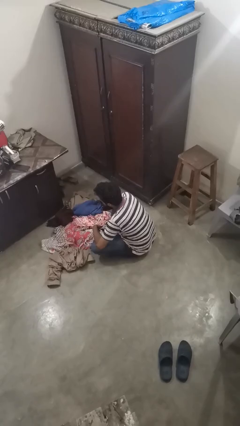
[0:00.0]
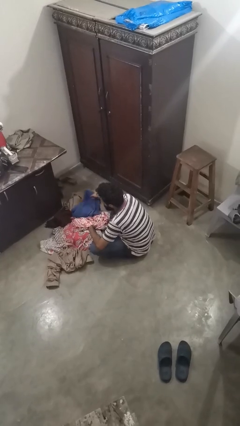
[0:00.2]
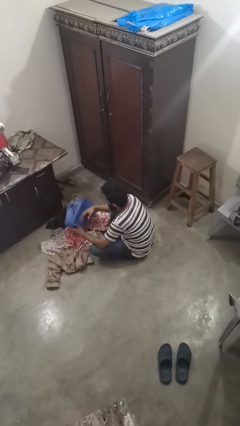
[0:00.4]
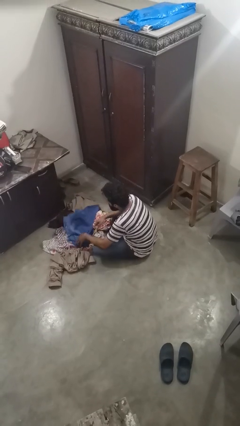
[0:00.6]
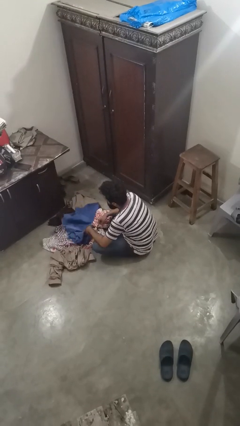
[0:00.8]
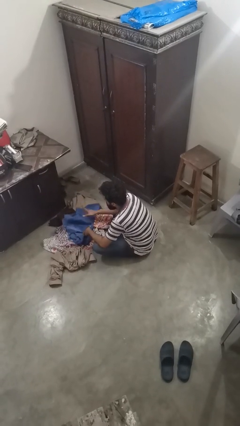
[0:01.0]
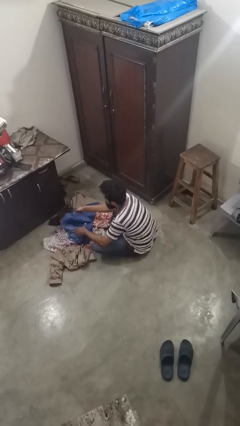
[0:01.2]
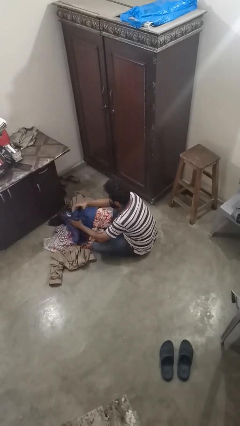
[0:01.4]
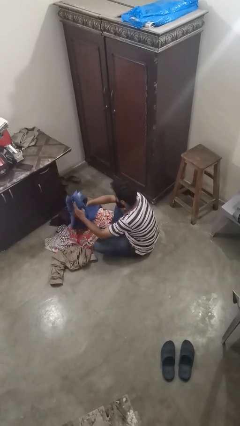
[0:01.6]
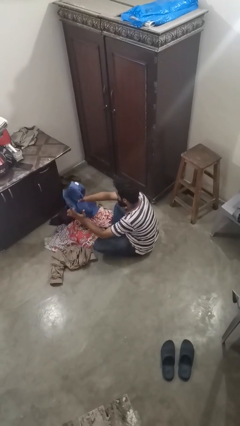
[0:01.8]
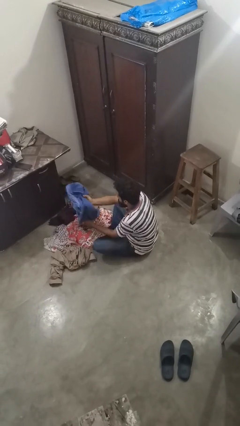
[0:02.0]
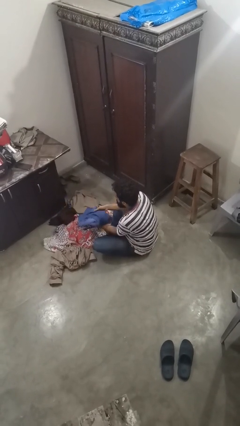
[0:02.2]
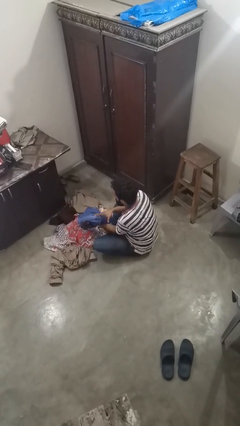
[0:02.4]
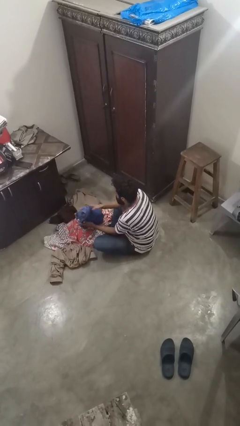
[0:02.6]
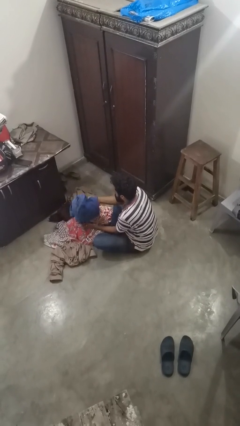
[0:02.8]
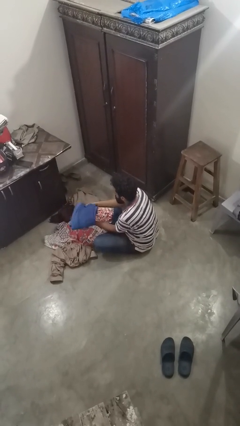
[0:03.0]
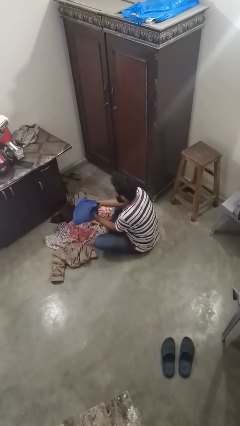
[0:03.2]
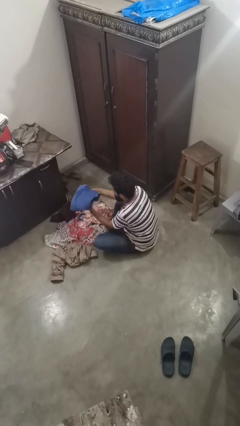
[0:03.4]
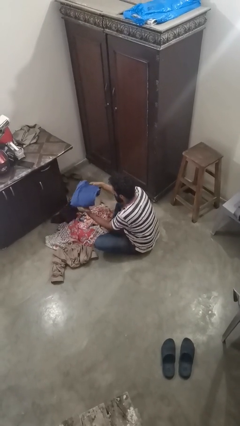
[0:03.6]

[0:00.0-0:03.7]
person folds pants

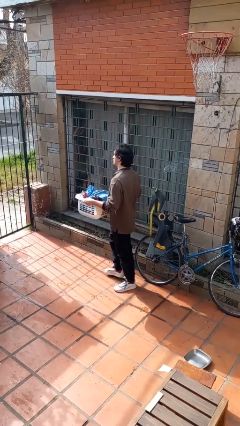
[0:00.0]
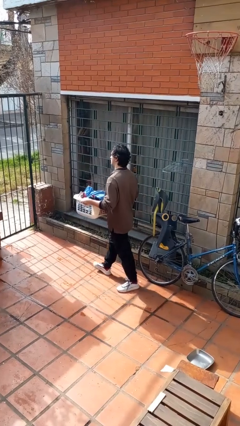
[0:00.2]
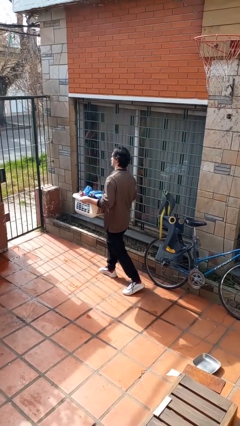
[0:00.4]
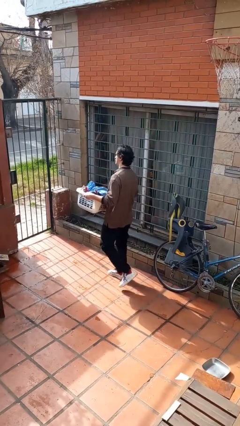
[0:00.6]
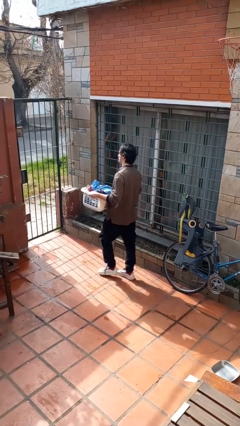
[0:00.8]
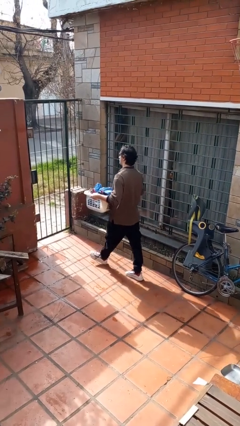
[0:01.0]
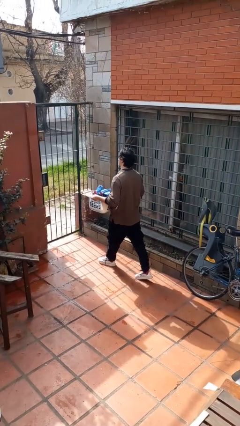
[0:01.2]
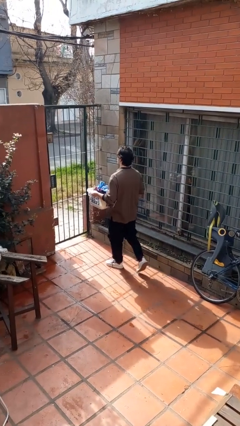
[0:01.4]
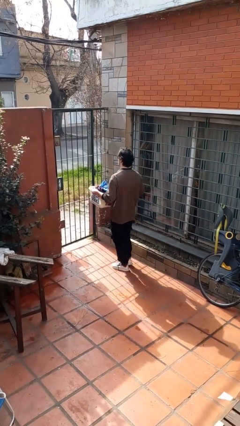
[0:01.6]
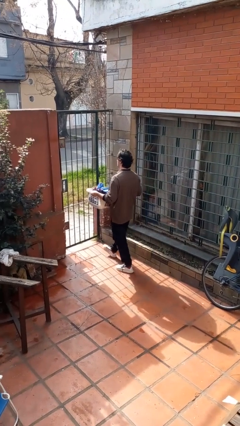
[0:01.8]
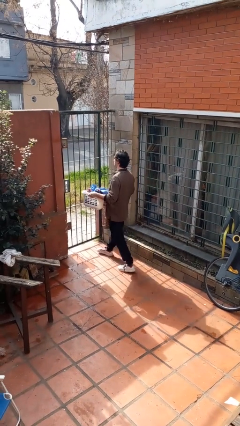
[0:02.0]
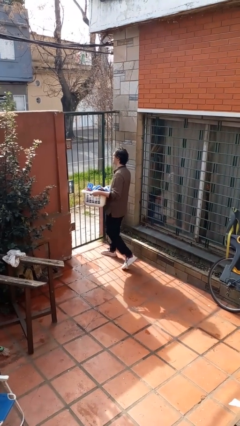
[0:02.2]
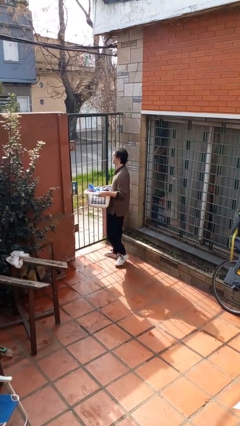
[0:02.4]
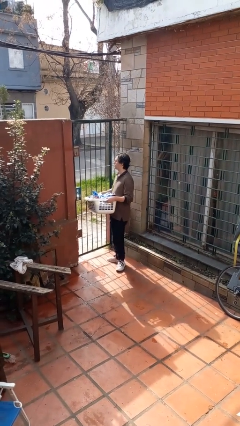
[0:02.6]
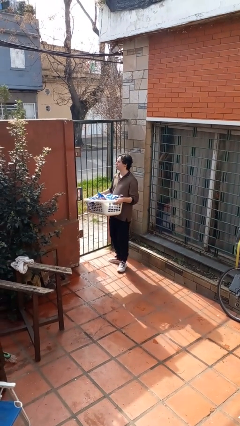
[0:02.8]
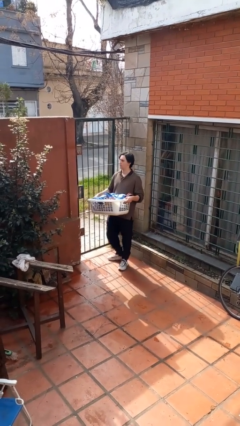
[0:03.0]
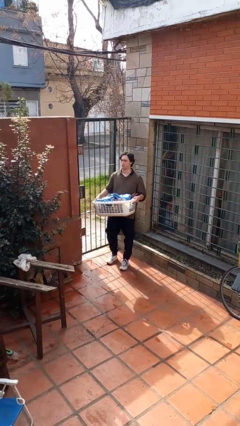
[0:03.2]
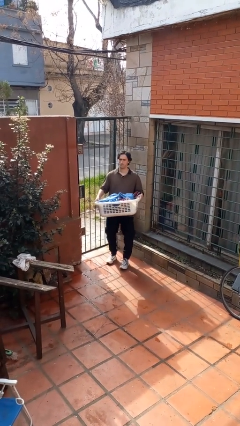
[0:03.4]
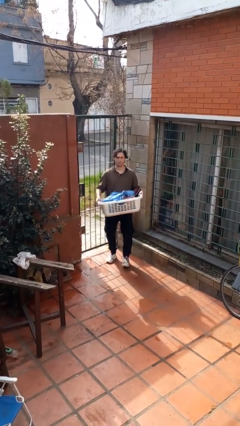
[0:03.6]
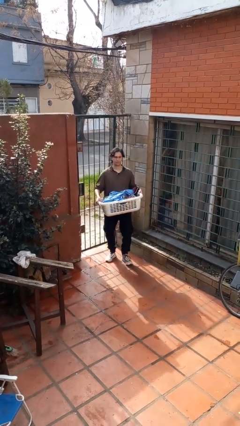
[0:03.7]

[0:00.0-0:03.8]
person carries laundry basket

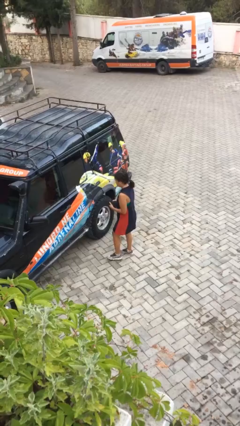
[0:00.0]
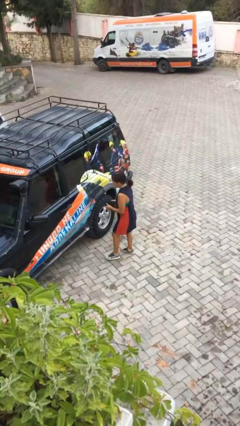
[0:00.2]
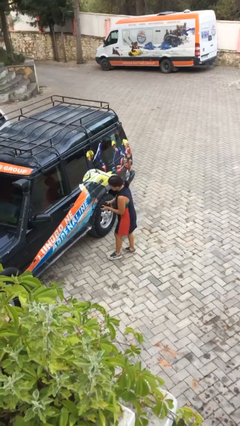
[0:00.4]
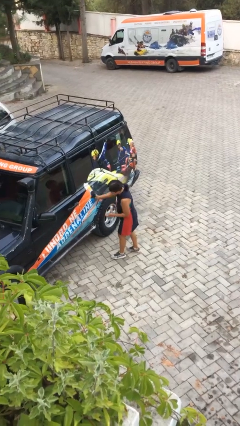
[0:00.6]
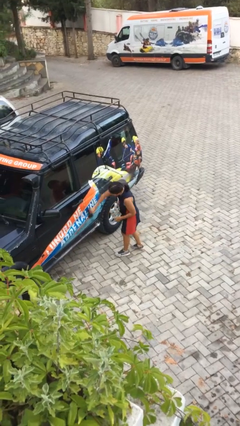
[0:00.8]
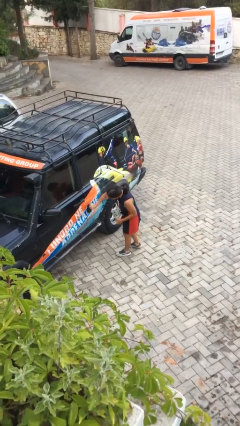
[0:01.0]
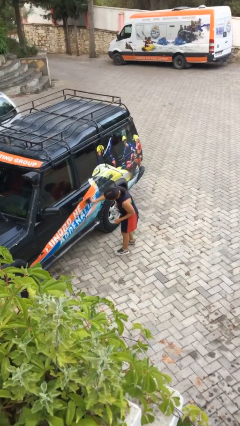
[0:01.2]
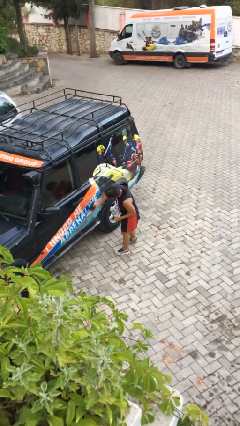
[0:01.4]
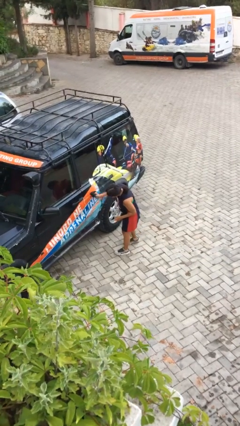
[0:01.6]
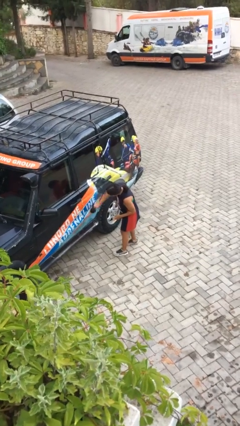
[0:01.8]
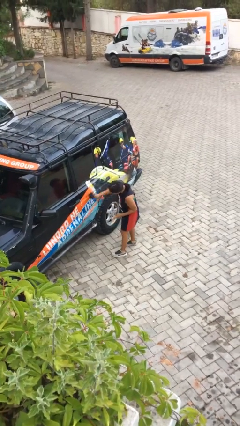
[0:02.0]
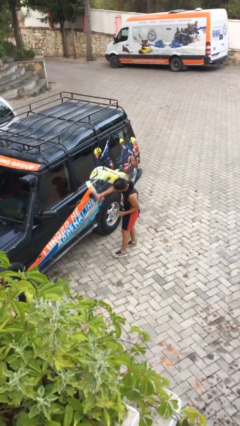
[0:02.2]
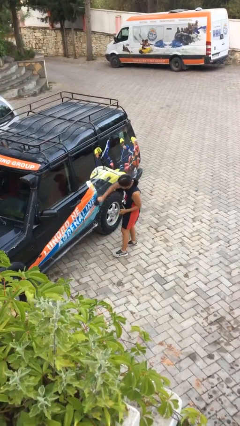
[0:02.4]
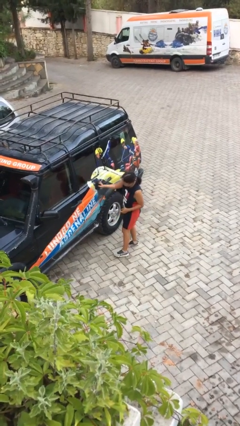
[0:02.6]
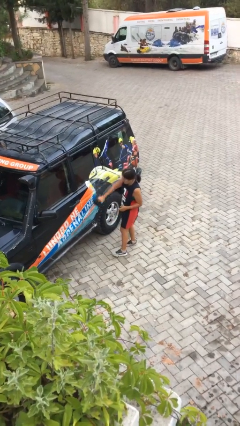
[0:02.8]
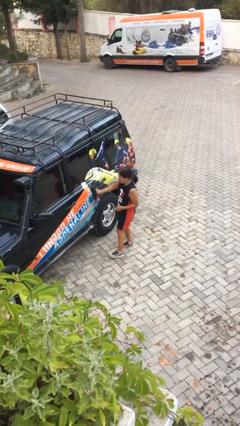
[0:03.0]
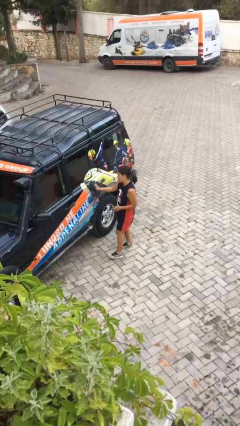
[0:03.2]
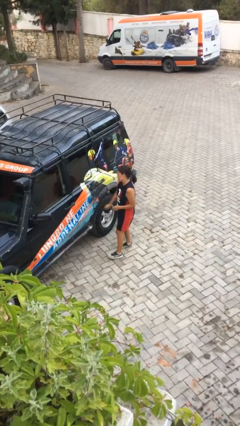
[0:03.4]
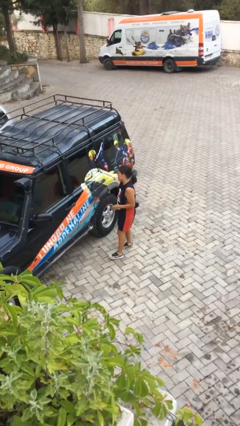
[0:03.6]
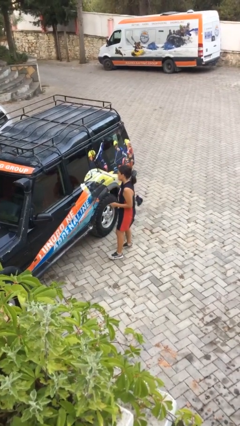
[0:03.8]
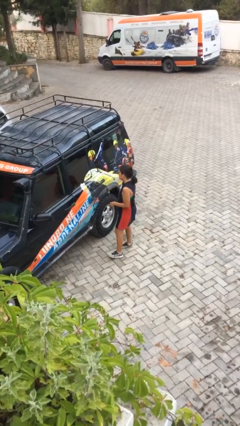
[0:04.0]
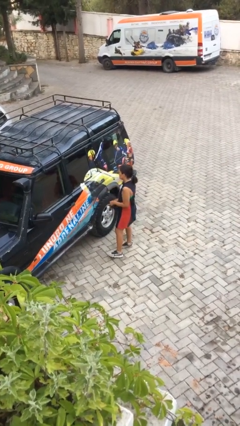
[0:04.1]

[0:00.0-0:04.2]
person polishes car with rag

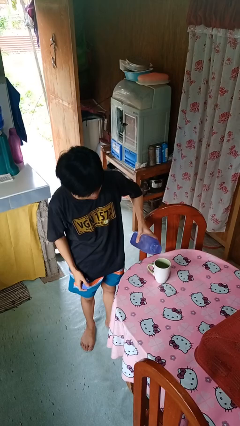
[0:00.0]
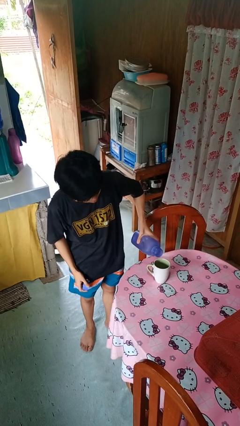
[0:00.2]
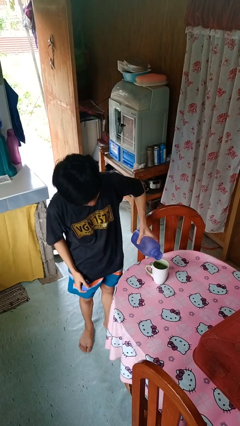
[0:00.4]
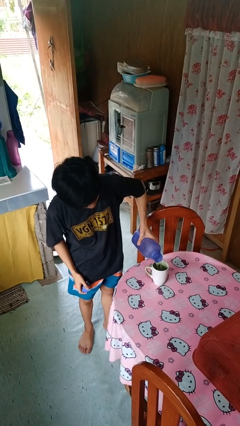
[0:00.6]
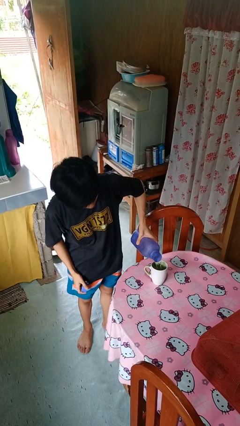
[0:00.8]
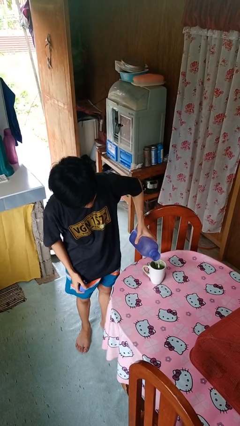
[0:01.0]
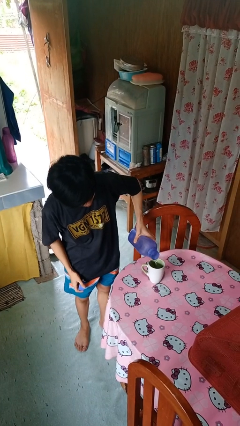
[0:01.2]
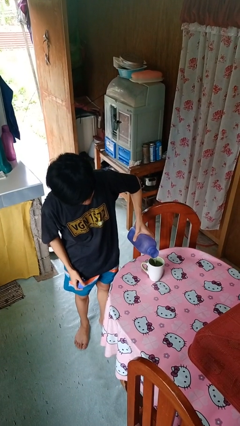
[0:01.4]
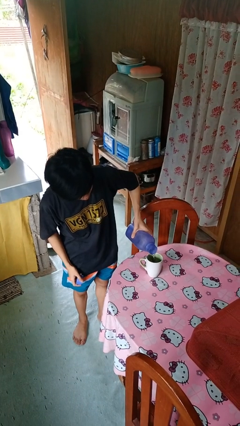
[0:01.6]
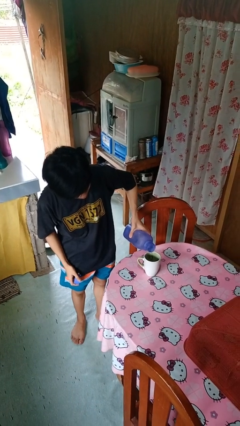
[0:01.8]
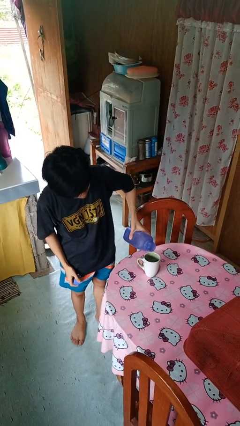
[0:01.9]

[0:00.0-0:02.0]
person pours liquid into cup

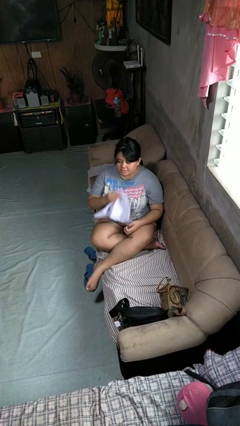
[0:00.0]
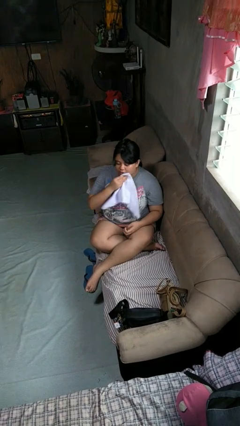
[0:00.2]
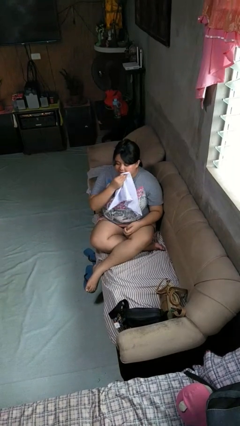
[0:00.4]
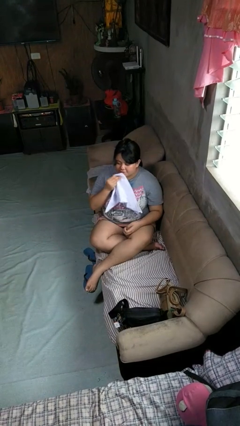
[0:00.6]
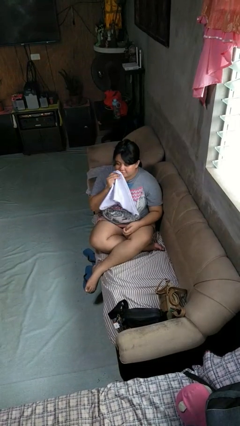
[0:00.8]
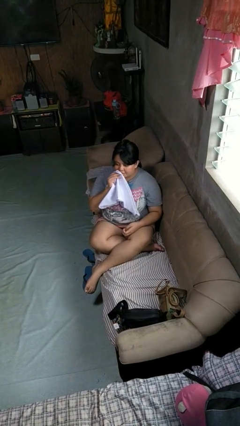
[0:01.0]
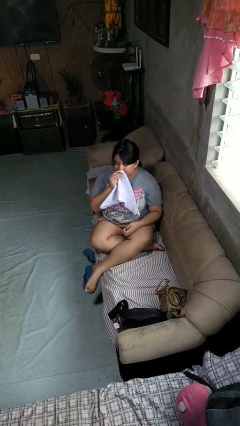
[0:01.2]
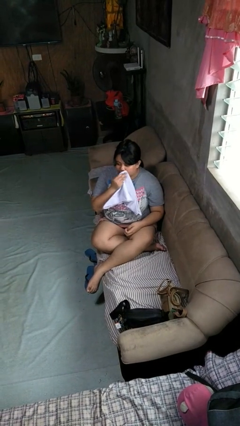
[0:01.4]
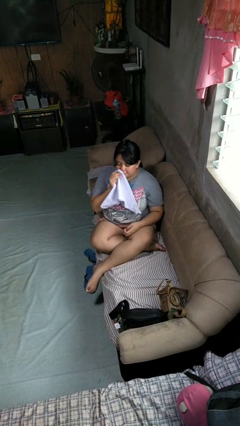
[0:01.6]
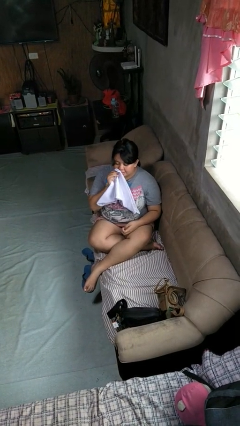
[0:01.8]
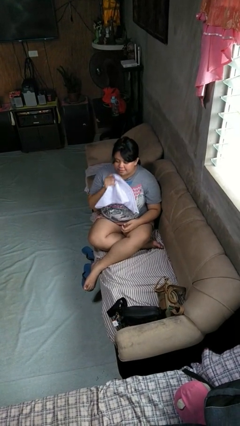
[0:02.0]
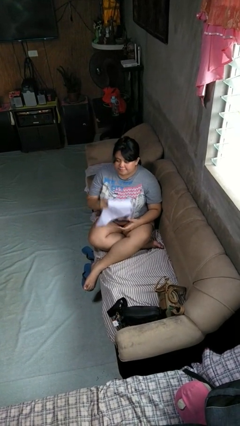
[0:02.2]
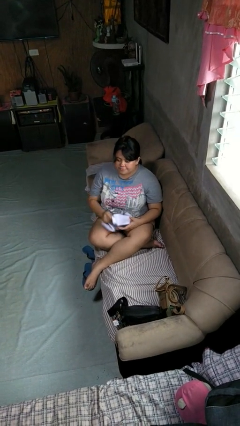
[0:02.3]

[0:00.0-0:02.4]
person wipes mouth with napkin

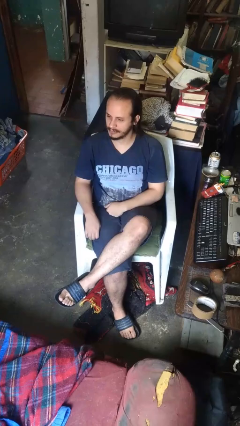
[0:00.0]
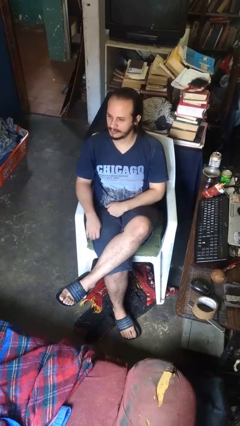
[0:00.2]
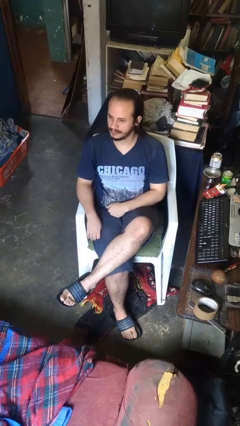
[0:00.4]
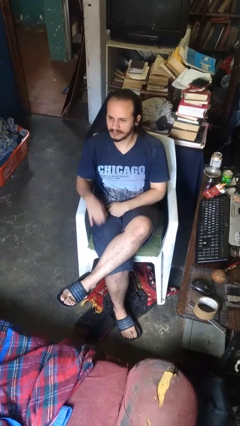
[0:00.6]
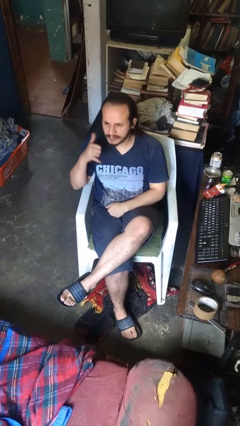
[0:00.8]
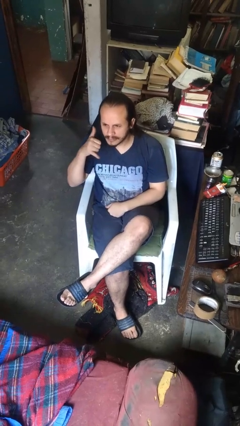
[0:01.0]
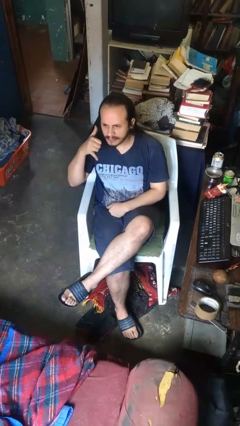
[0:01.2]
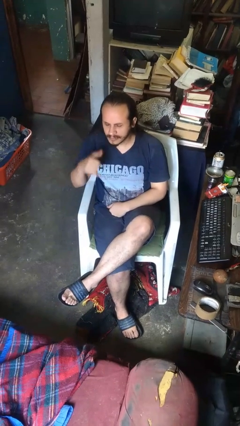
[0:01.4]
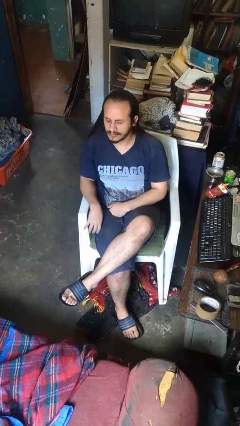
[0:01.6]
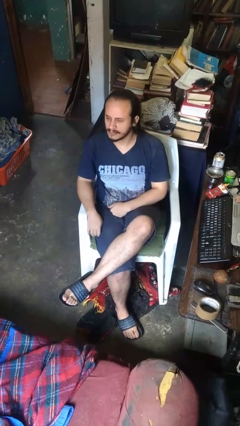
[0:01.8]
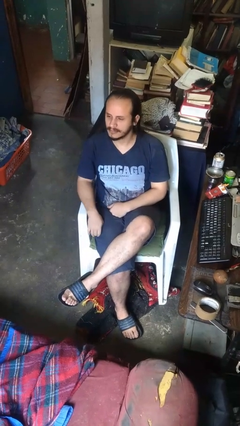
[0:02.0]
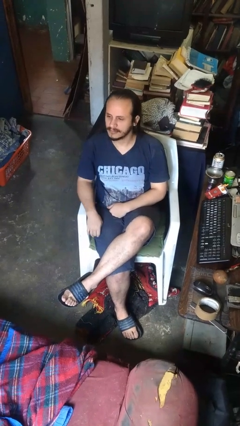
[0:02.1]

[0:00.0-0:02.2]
person gestures call me
